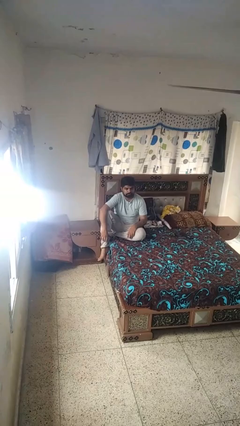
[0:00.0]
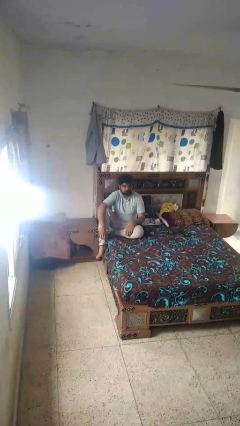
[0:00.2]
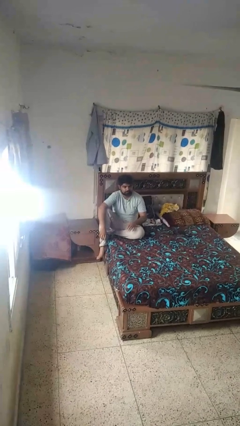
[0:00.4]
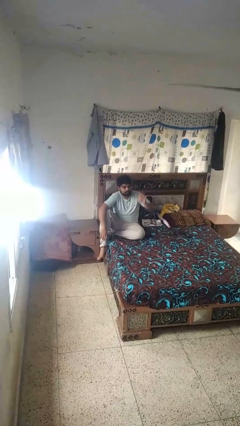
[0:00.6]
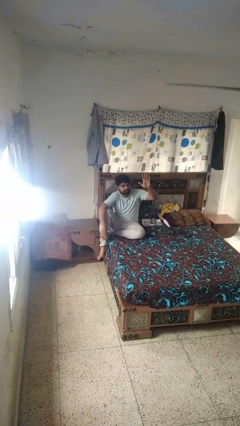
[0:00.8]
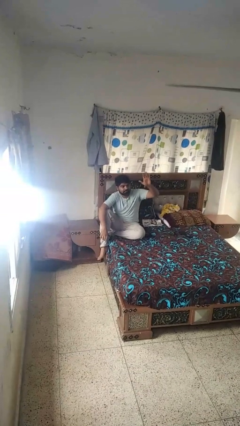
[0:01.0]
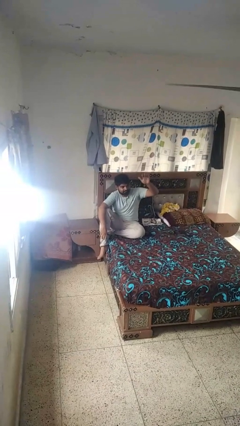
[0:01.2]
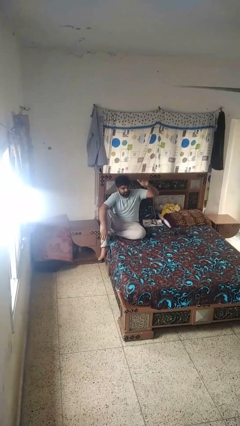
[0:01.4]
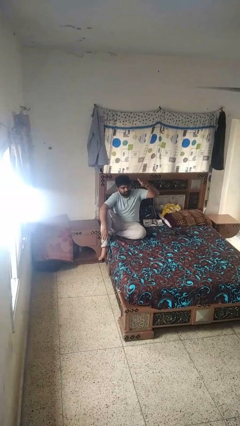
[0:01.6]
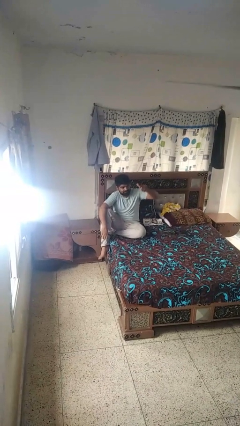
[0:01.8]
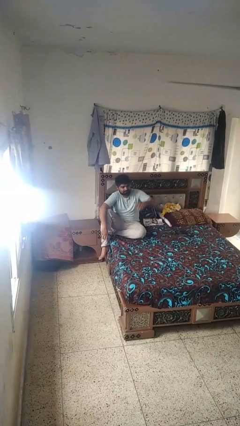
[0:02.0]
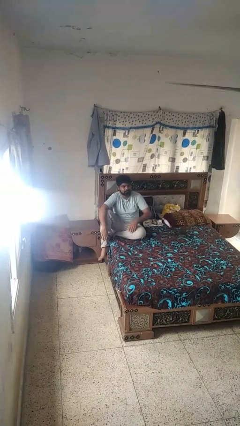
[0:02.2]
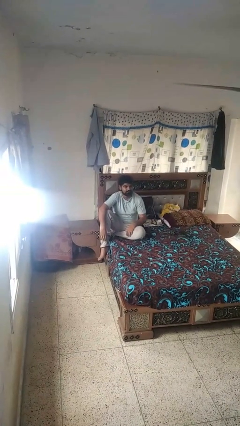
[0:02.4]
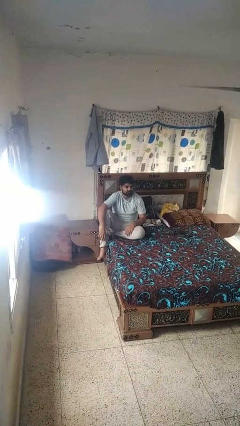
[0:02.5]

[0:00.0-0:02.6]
person gestures come here

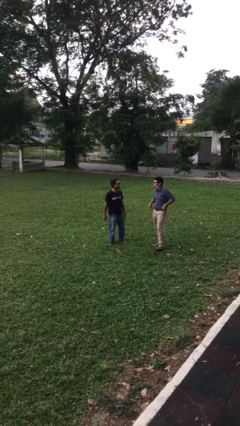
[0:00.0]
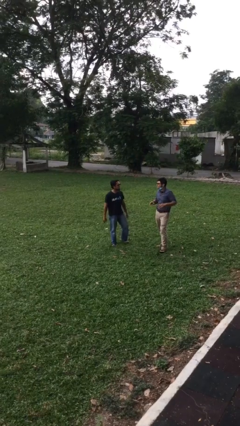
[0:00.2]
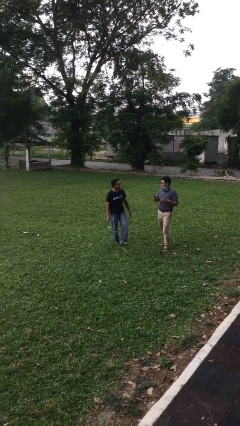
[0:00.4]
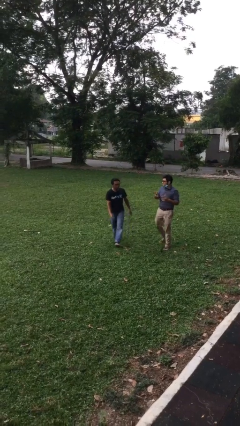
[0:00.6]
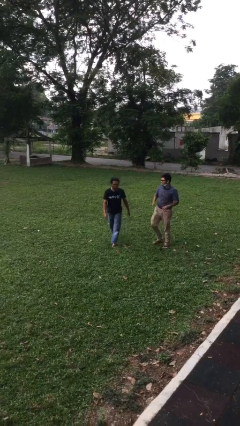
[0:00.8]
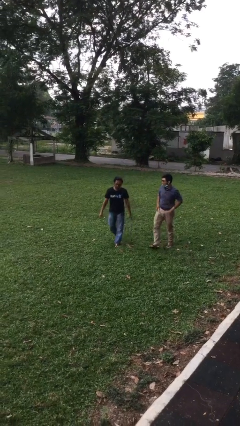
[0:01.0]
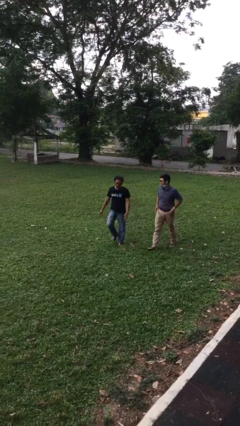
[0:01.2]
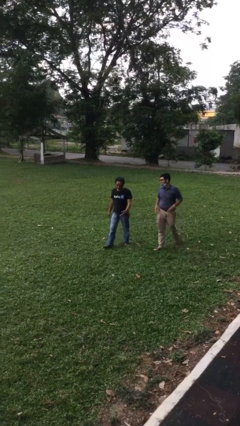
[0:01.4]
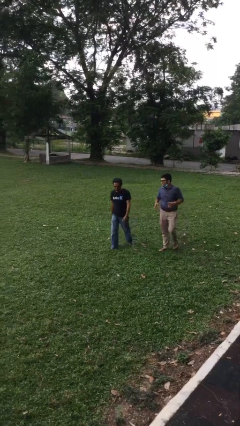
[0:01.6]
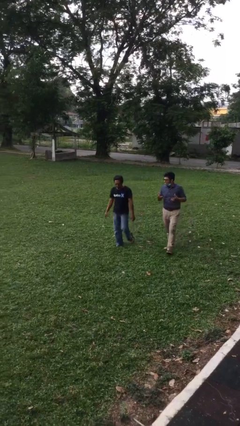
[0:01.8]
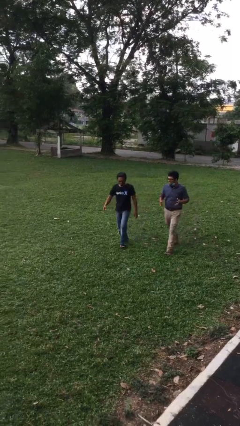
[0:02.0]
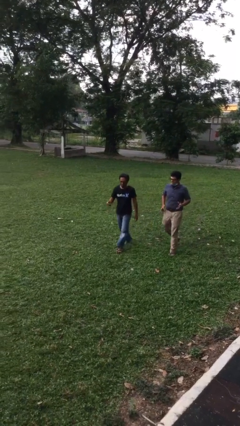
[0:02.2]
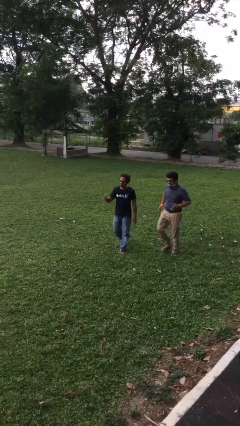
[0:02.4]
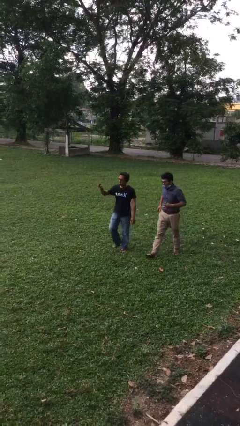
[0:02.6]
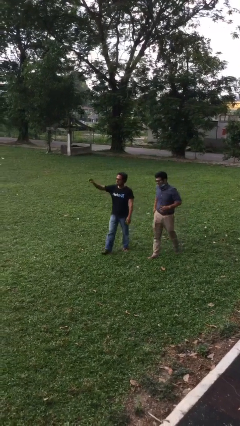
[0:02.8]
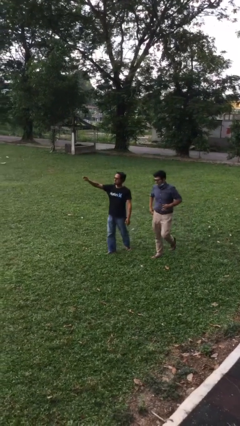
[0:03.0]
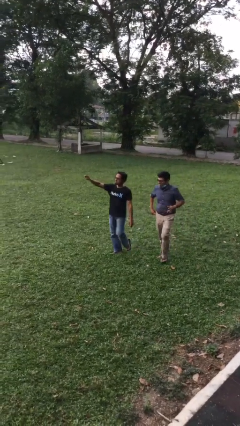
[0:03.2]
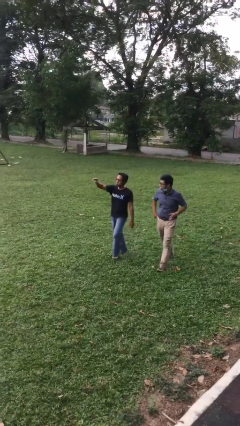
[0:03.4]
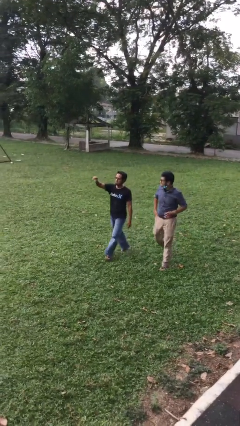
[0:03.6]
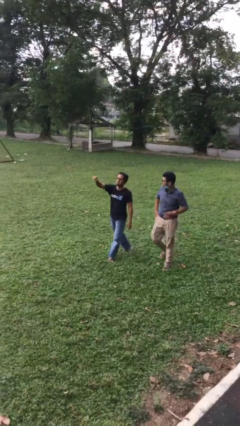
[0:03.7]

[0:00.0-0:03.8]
person talks to person

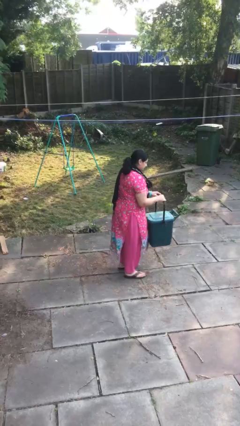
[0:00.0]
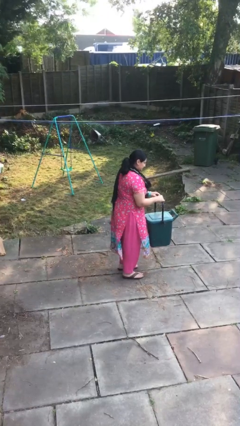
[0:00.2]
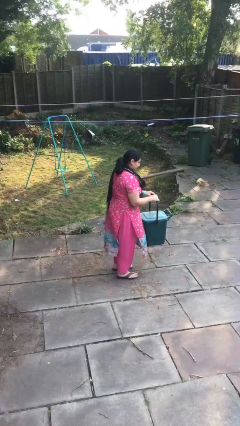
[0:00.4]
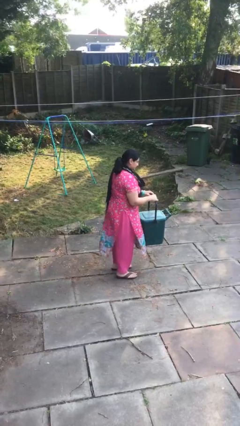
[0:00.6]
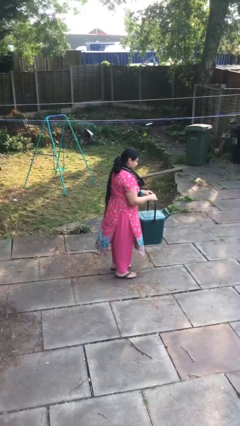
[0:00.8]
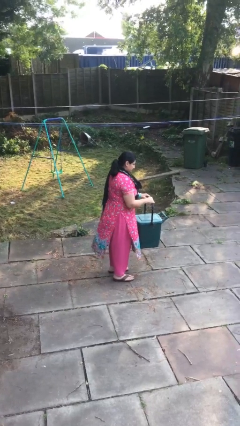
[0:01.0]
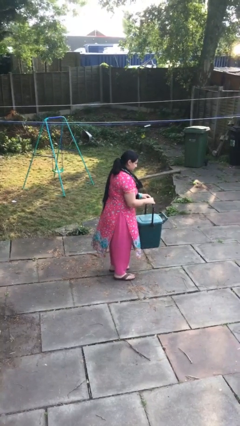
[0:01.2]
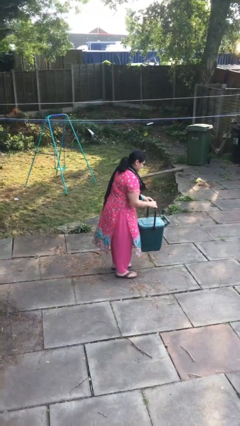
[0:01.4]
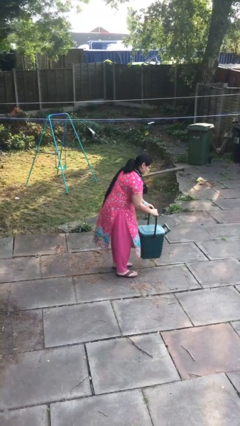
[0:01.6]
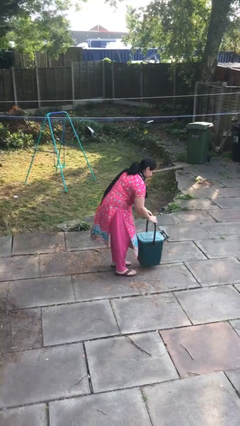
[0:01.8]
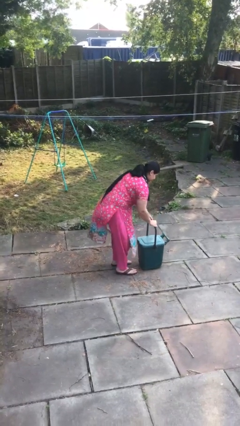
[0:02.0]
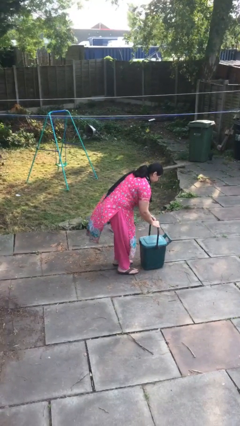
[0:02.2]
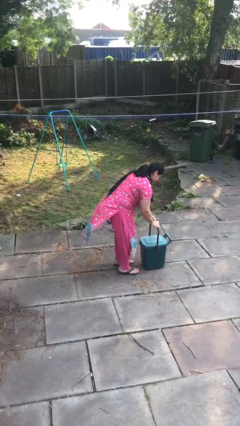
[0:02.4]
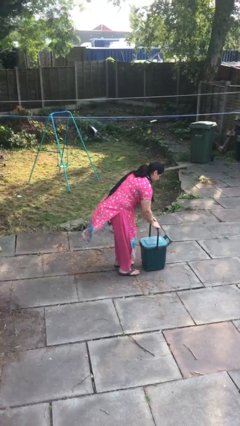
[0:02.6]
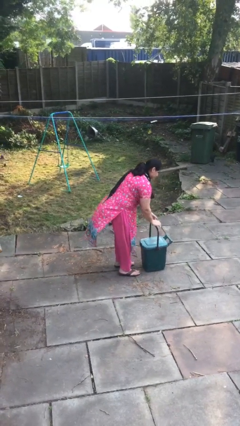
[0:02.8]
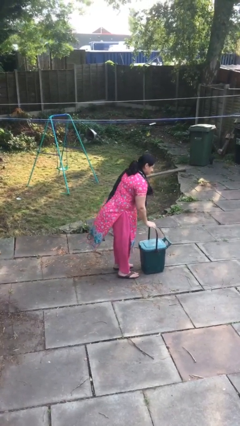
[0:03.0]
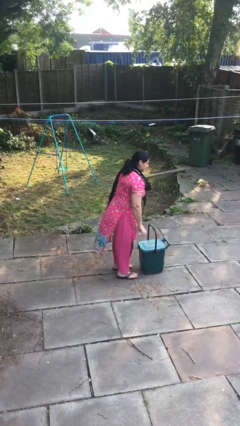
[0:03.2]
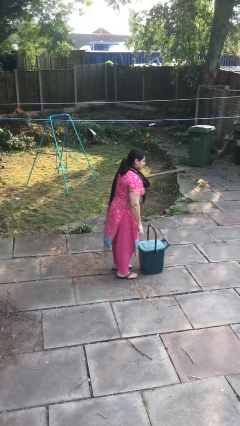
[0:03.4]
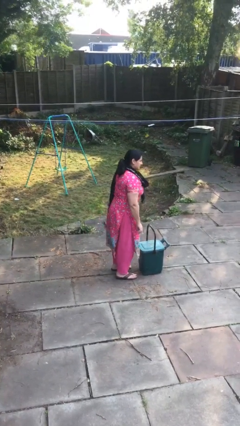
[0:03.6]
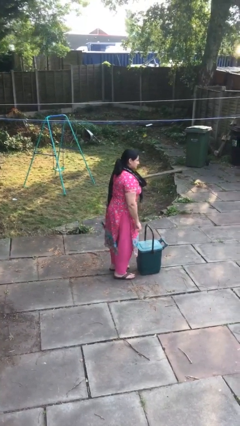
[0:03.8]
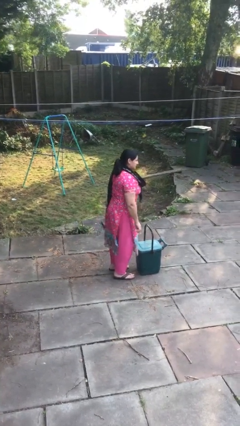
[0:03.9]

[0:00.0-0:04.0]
person puts down object on floor

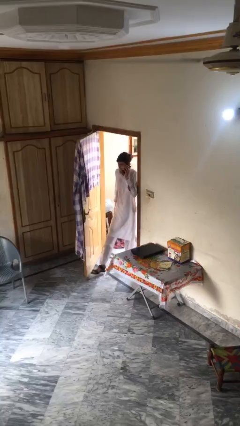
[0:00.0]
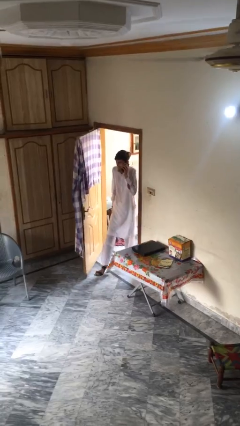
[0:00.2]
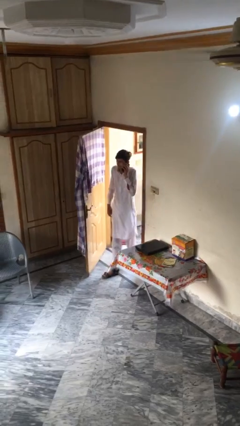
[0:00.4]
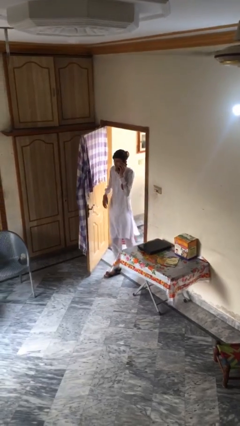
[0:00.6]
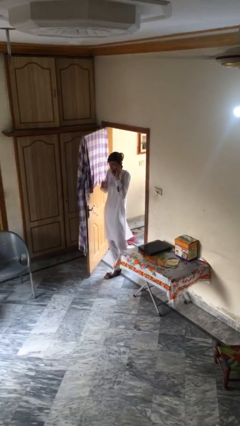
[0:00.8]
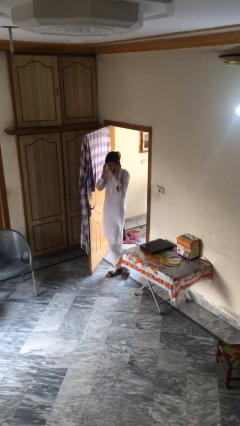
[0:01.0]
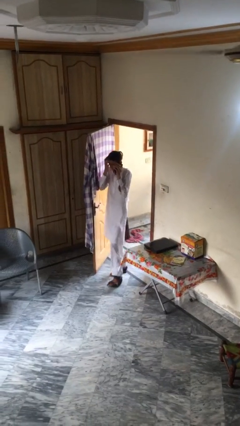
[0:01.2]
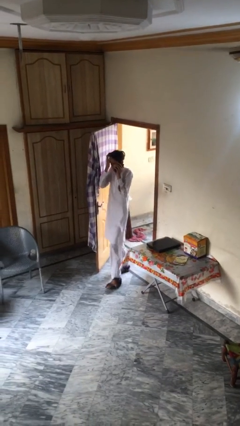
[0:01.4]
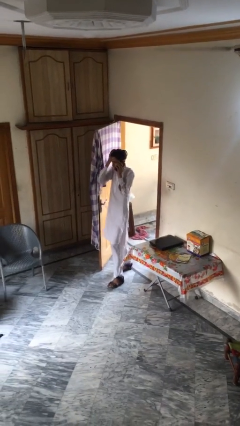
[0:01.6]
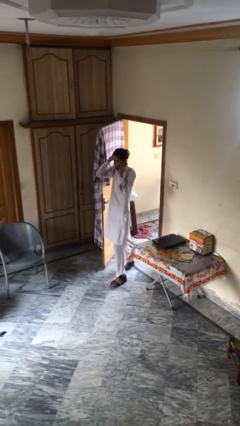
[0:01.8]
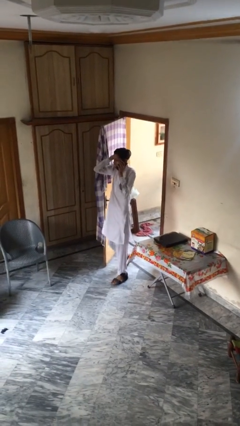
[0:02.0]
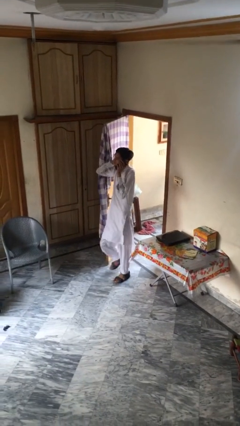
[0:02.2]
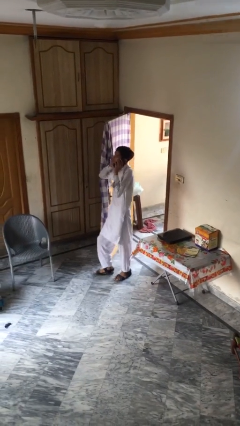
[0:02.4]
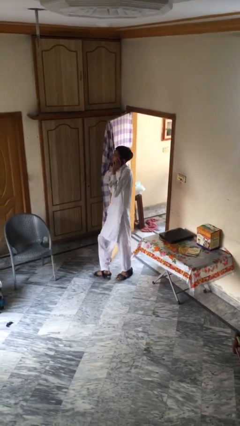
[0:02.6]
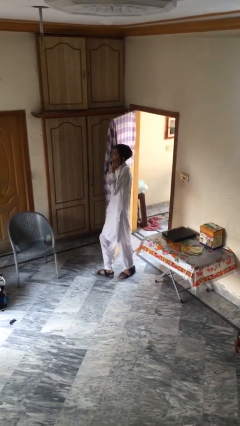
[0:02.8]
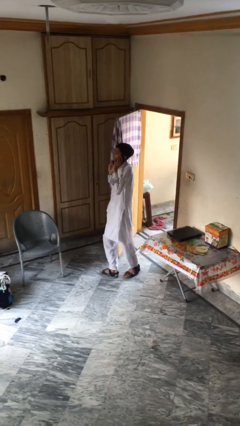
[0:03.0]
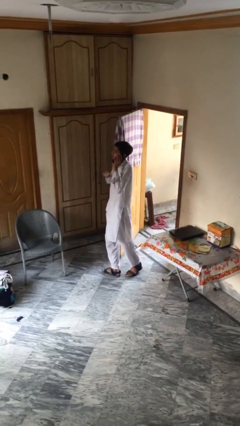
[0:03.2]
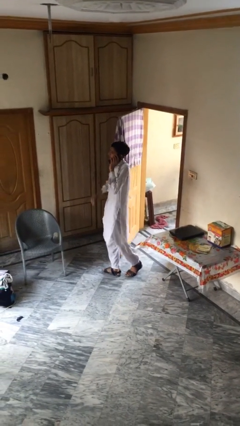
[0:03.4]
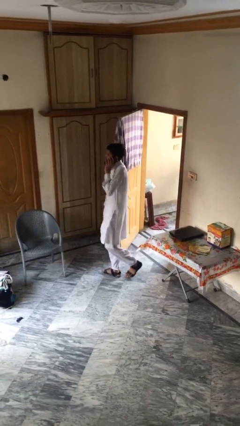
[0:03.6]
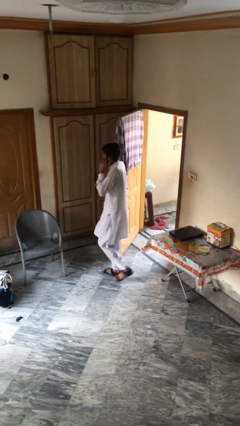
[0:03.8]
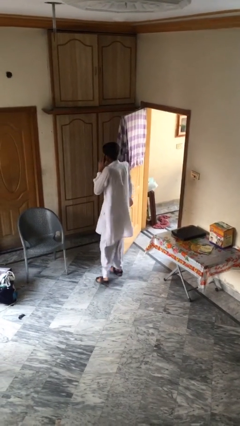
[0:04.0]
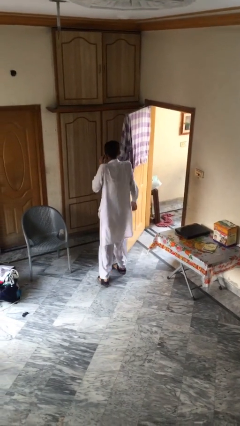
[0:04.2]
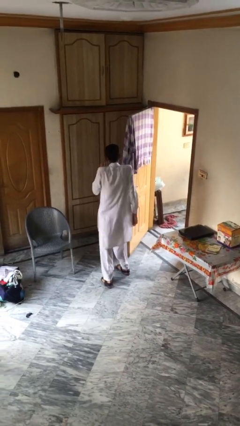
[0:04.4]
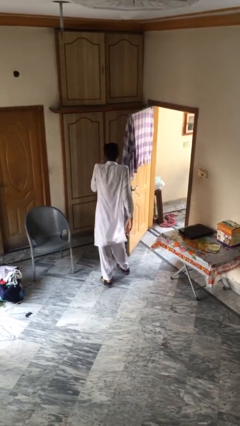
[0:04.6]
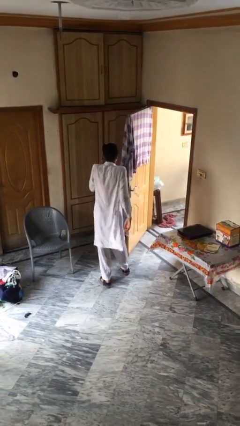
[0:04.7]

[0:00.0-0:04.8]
person enters scene through structure

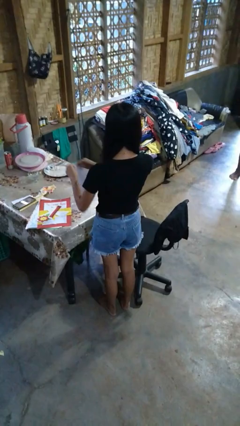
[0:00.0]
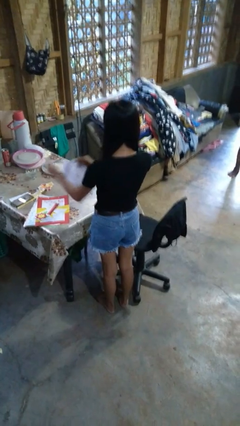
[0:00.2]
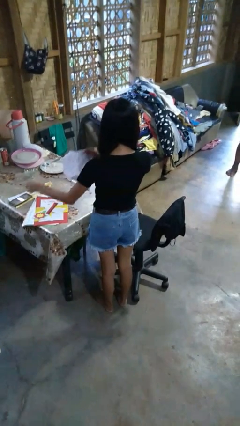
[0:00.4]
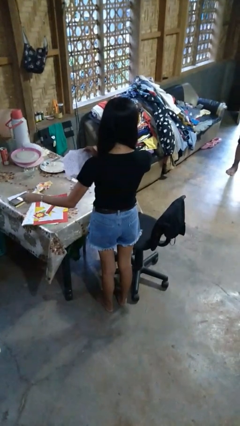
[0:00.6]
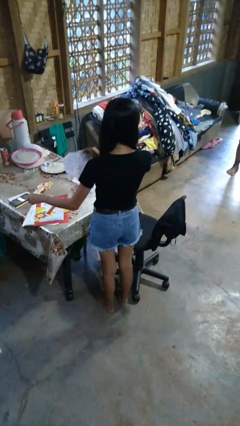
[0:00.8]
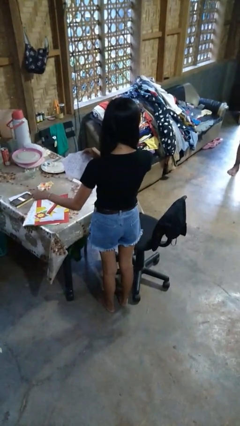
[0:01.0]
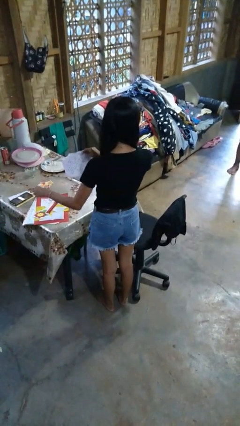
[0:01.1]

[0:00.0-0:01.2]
person tears paper

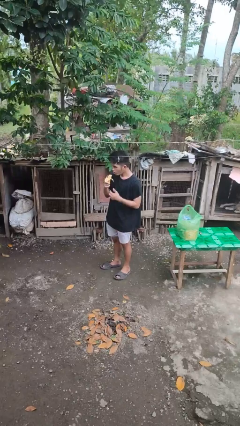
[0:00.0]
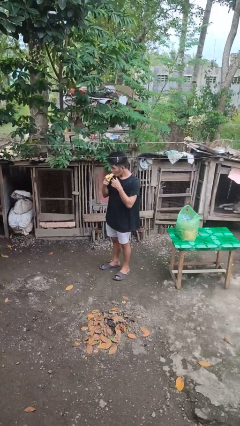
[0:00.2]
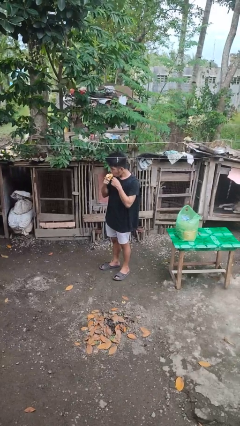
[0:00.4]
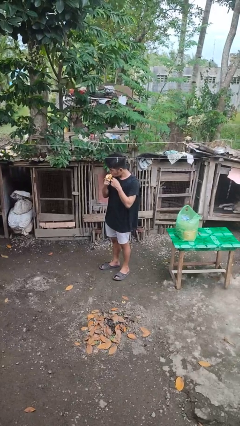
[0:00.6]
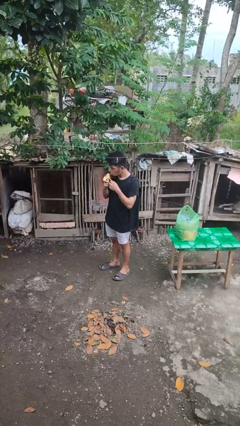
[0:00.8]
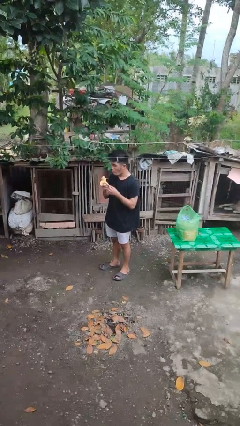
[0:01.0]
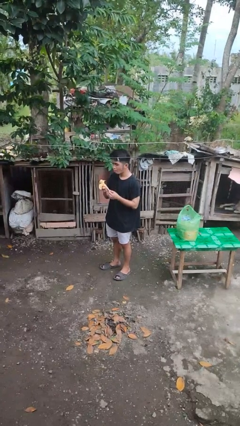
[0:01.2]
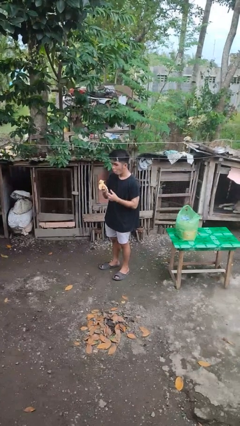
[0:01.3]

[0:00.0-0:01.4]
person eats banana
